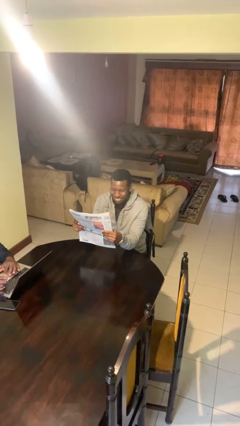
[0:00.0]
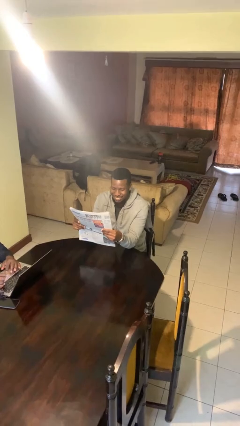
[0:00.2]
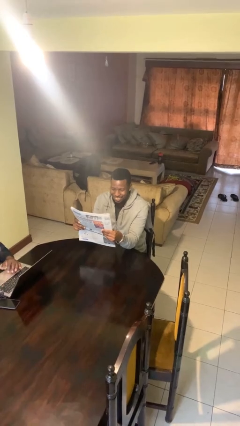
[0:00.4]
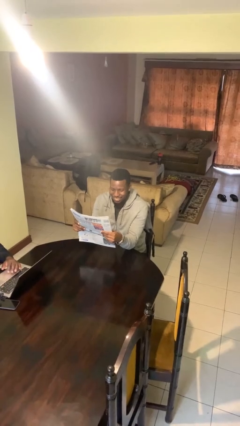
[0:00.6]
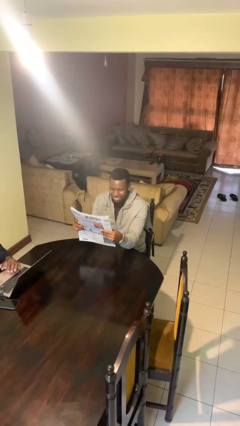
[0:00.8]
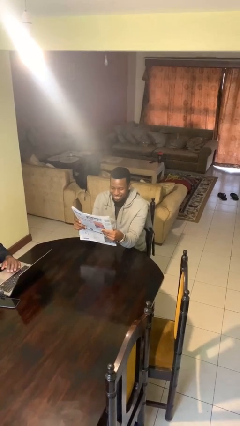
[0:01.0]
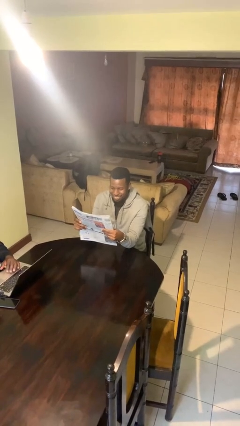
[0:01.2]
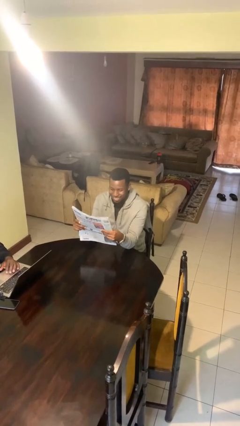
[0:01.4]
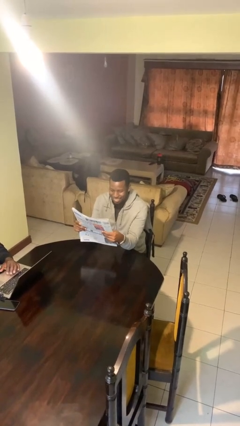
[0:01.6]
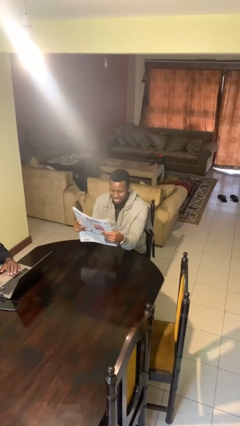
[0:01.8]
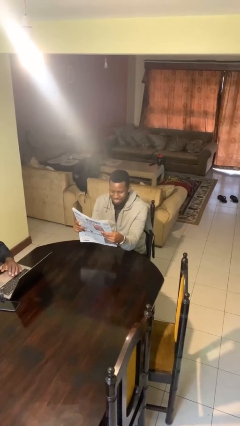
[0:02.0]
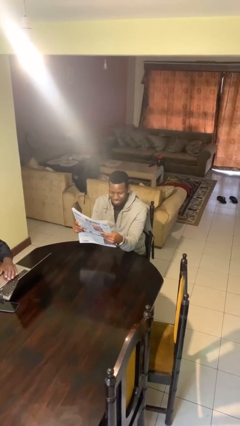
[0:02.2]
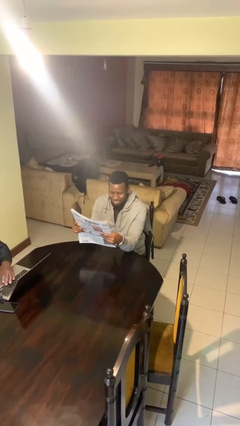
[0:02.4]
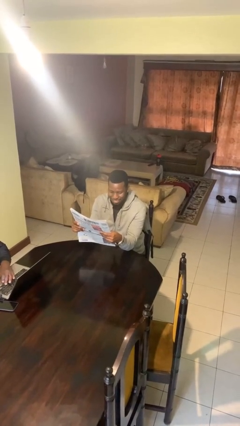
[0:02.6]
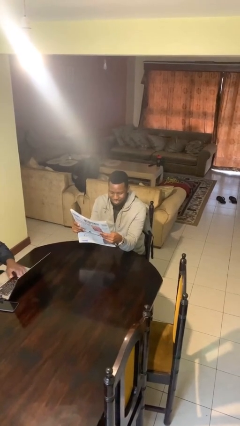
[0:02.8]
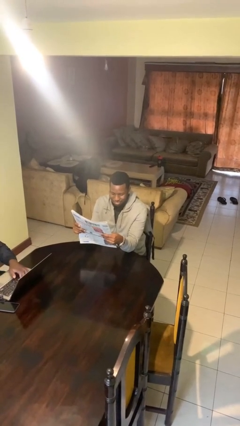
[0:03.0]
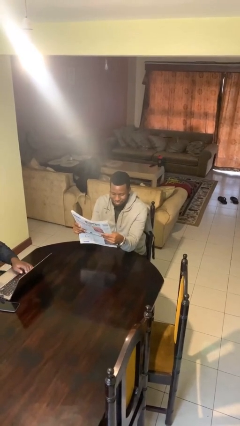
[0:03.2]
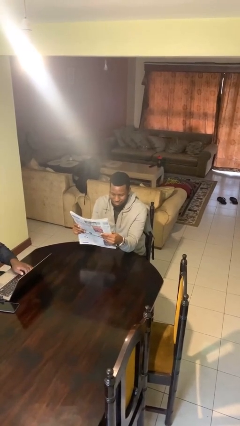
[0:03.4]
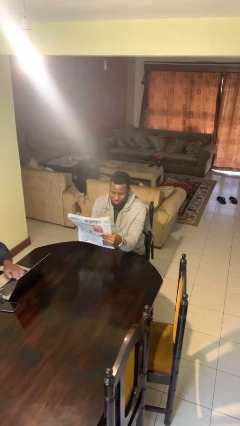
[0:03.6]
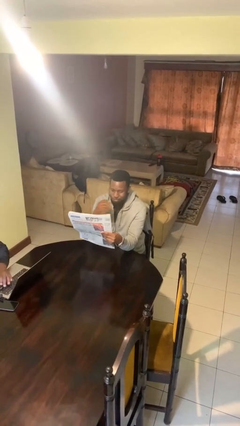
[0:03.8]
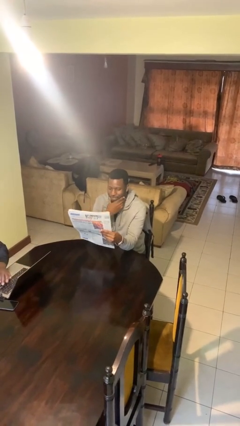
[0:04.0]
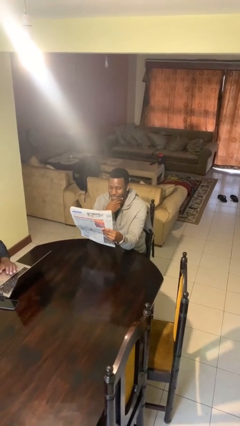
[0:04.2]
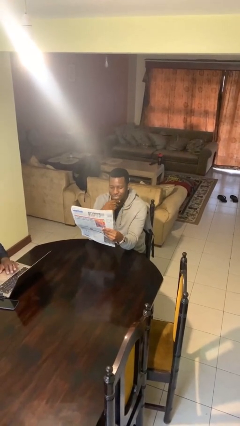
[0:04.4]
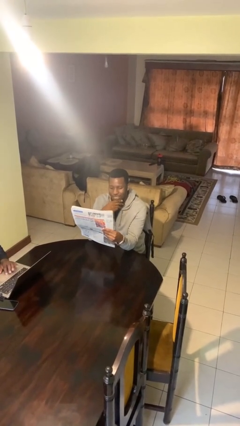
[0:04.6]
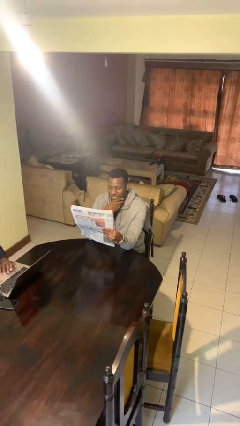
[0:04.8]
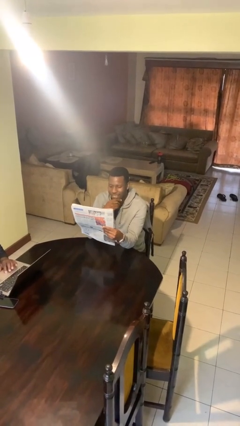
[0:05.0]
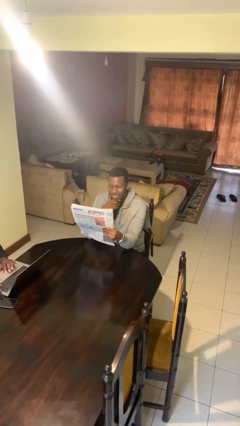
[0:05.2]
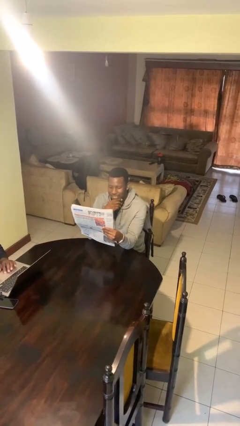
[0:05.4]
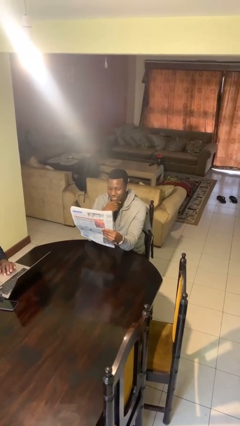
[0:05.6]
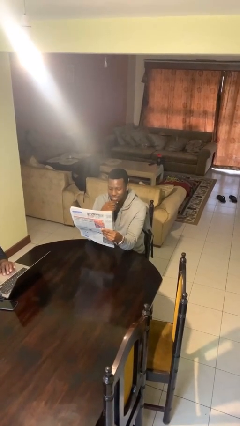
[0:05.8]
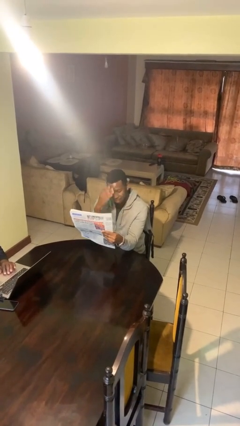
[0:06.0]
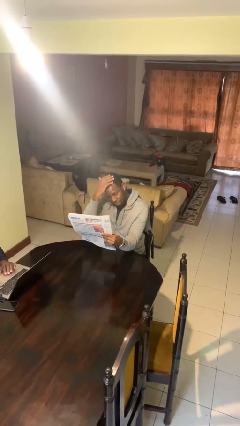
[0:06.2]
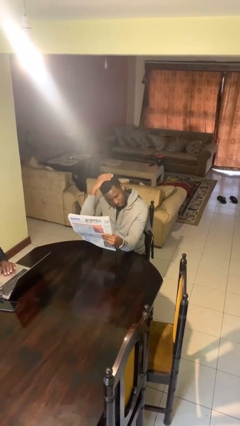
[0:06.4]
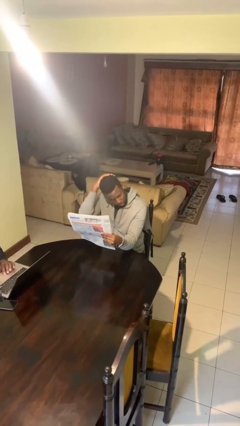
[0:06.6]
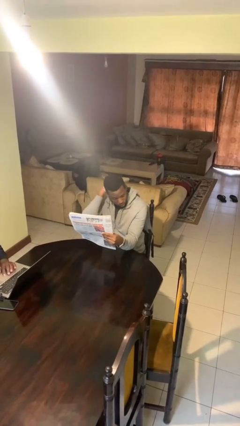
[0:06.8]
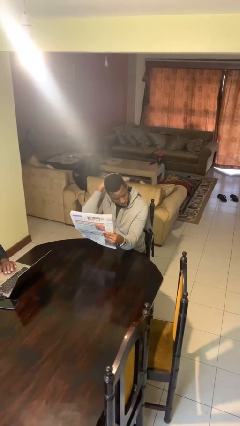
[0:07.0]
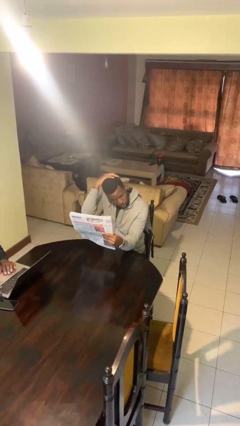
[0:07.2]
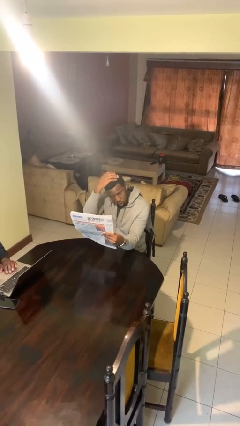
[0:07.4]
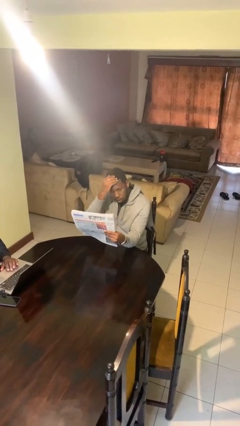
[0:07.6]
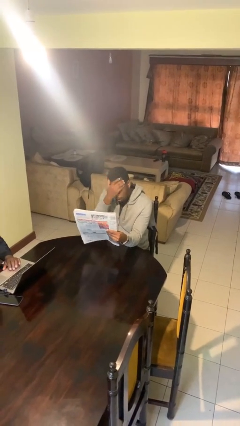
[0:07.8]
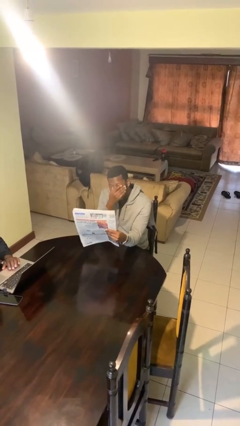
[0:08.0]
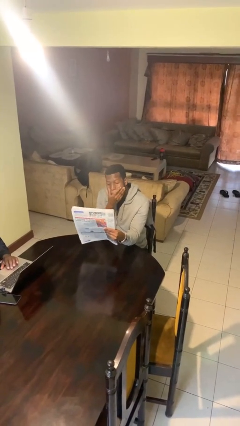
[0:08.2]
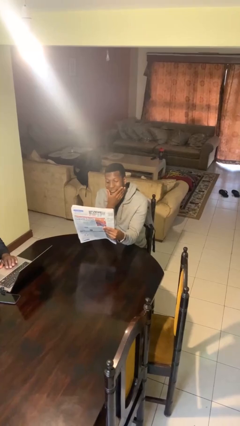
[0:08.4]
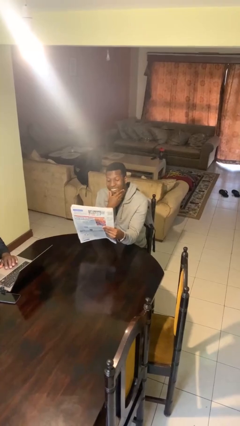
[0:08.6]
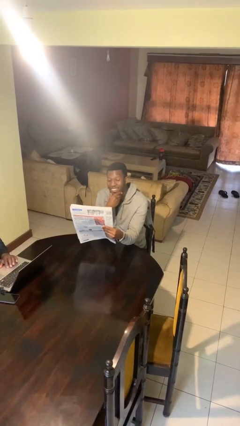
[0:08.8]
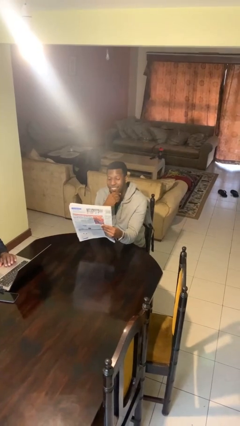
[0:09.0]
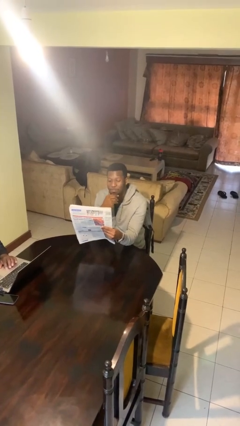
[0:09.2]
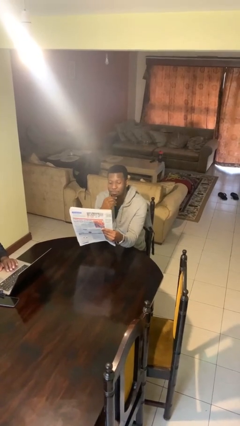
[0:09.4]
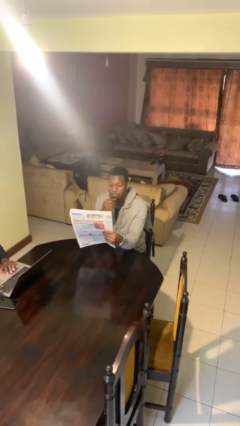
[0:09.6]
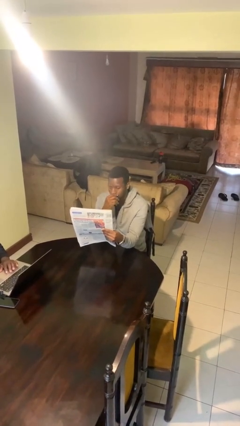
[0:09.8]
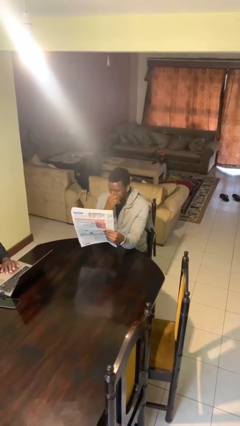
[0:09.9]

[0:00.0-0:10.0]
person reads document

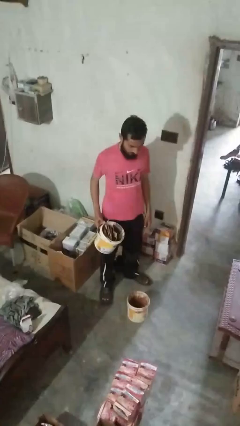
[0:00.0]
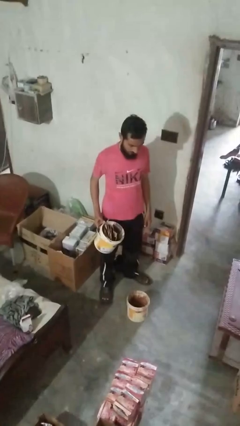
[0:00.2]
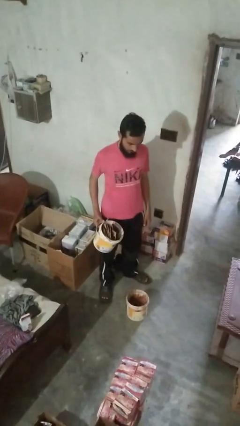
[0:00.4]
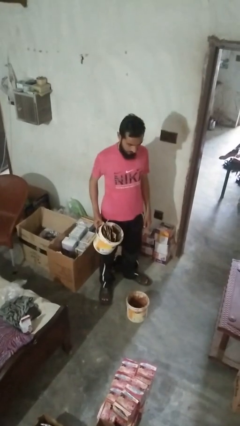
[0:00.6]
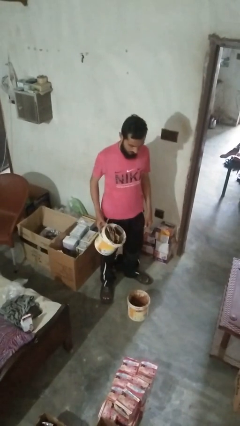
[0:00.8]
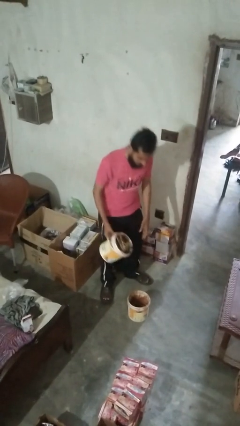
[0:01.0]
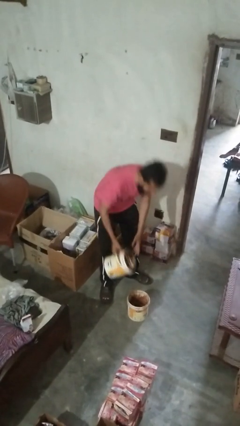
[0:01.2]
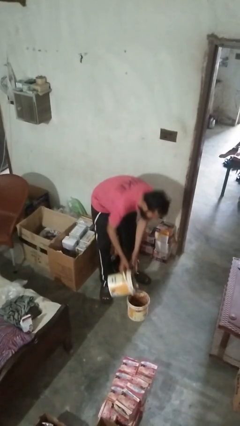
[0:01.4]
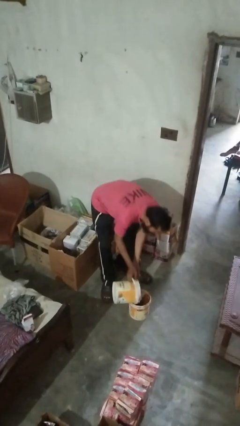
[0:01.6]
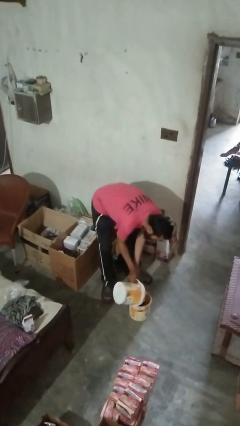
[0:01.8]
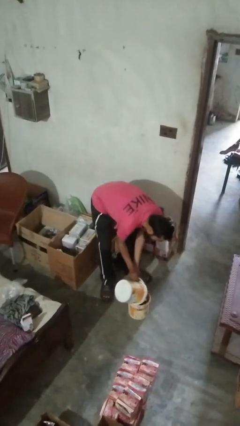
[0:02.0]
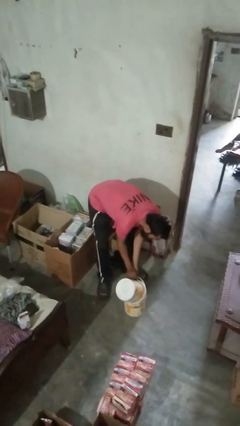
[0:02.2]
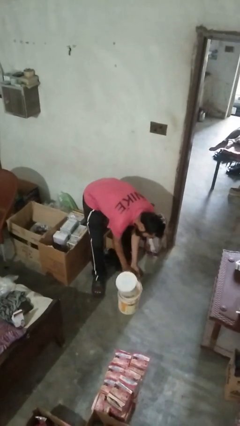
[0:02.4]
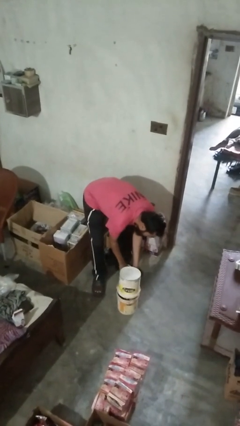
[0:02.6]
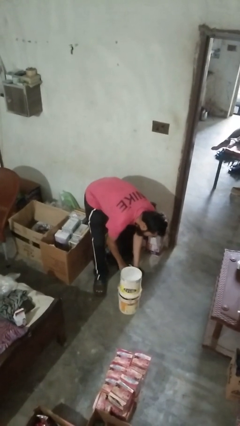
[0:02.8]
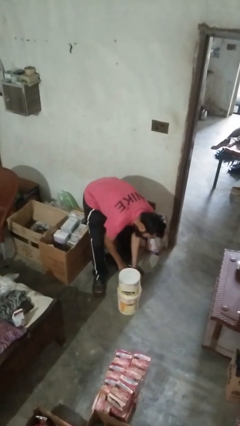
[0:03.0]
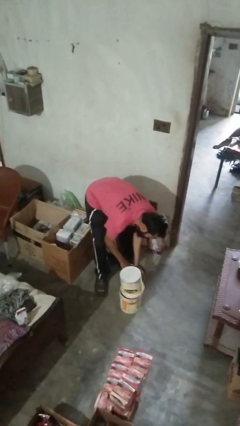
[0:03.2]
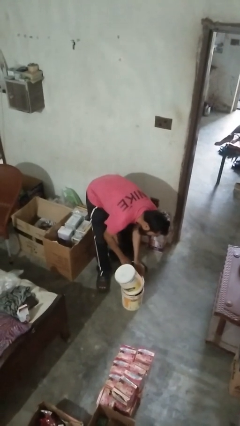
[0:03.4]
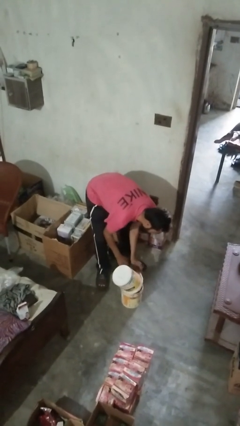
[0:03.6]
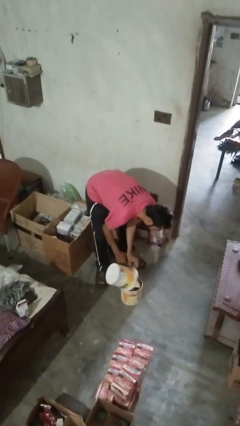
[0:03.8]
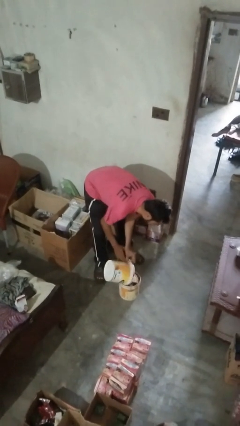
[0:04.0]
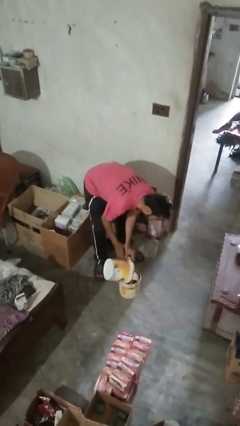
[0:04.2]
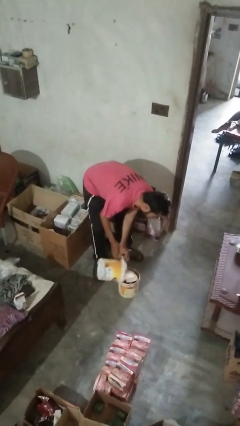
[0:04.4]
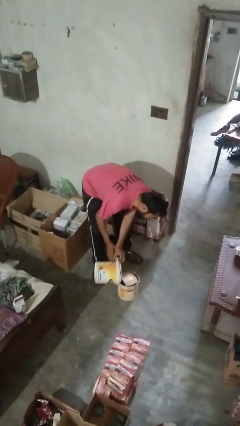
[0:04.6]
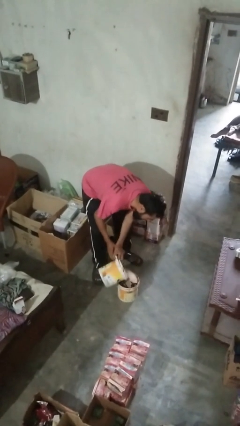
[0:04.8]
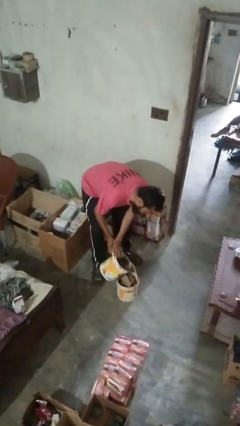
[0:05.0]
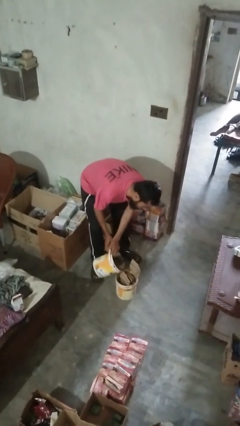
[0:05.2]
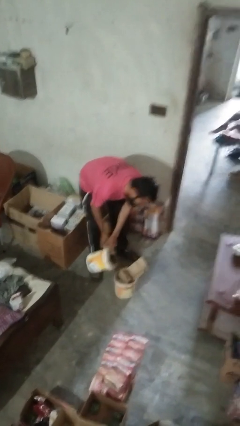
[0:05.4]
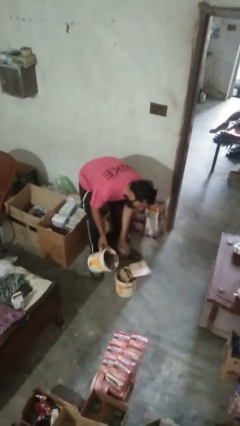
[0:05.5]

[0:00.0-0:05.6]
person removes trashbag from trashcan

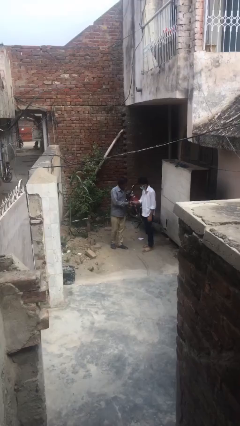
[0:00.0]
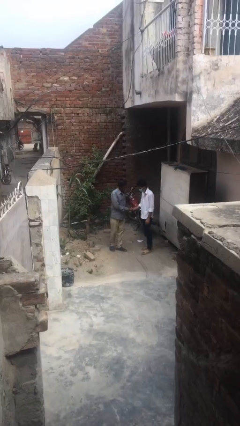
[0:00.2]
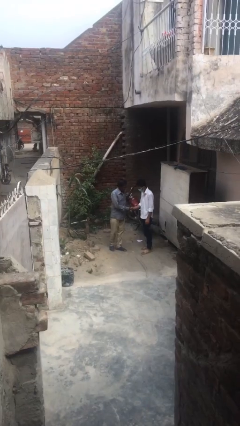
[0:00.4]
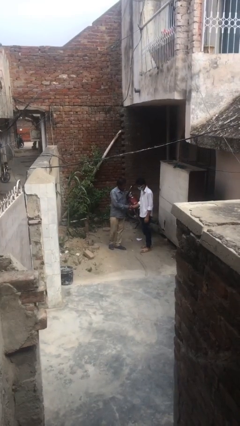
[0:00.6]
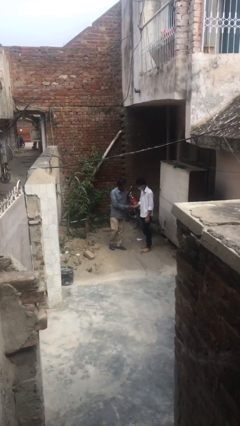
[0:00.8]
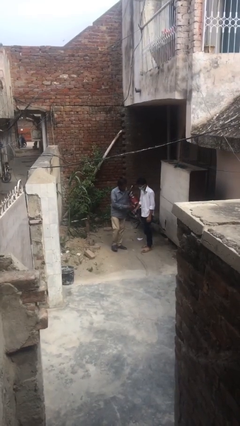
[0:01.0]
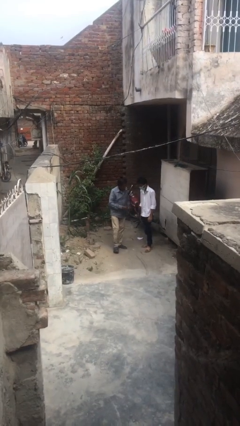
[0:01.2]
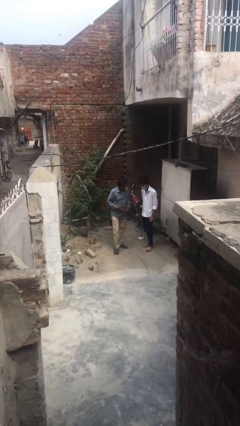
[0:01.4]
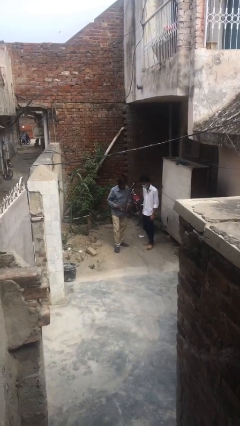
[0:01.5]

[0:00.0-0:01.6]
person shakes hand

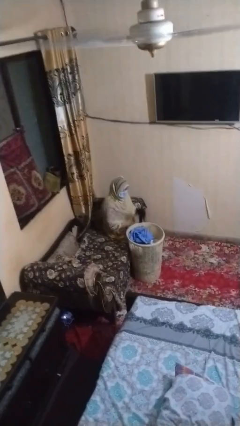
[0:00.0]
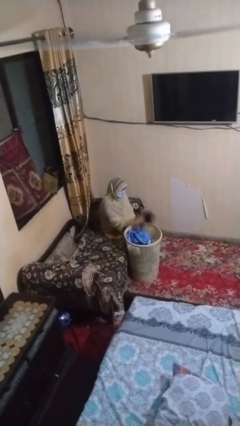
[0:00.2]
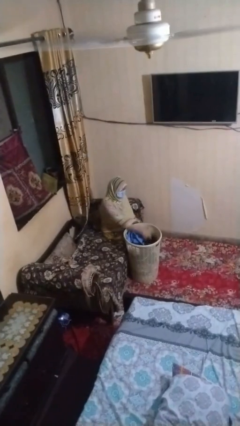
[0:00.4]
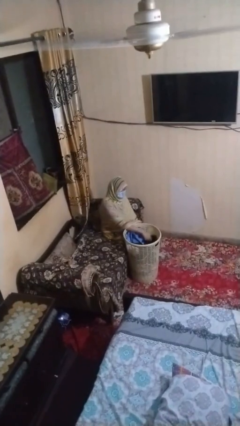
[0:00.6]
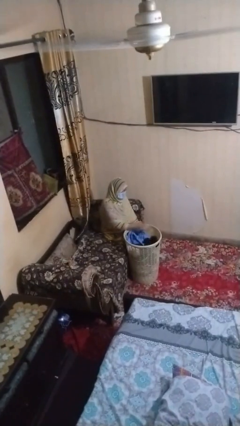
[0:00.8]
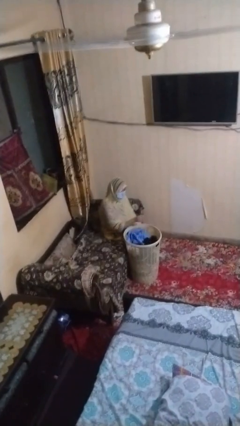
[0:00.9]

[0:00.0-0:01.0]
person puts object into basket
